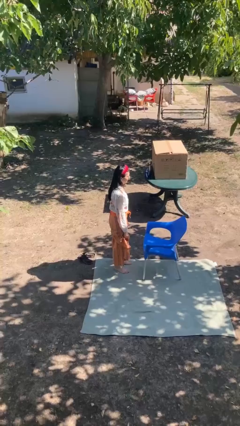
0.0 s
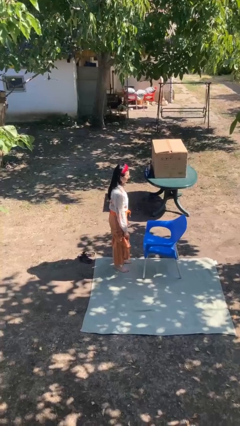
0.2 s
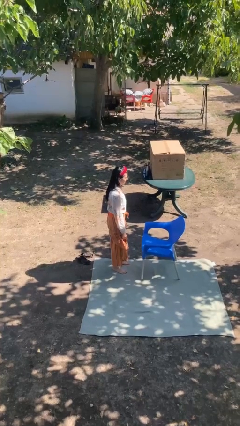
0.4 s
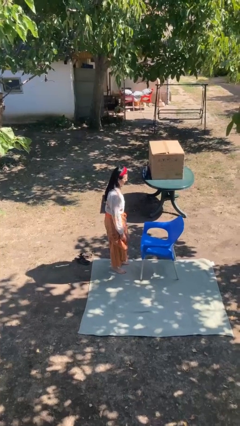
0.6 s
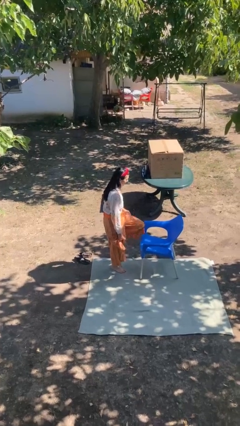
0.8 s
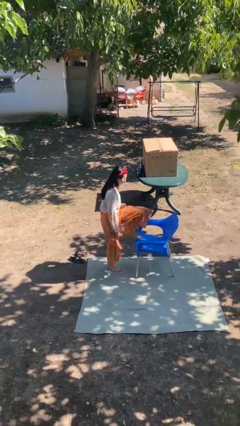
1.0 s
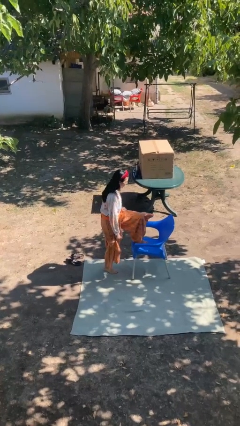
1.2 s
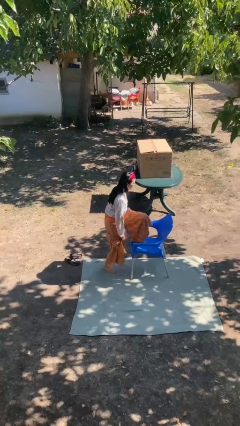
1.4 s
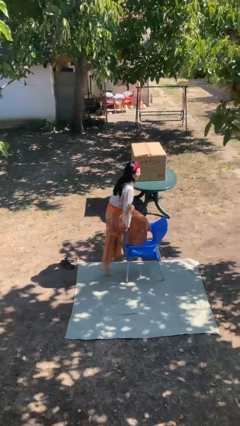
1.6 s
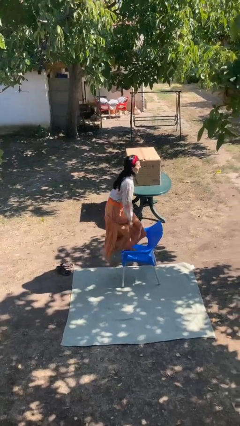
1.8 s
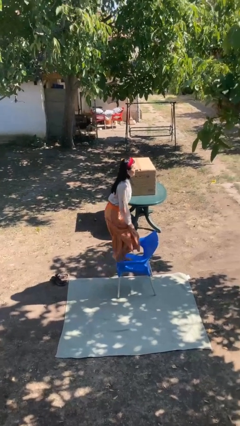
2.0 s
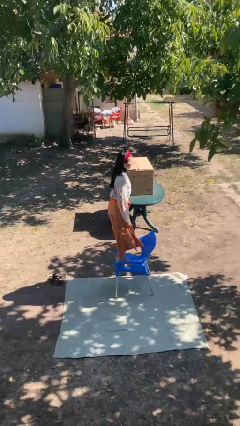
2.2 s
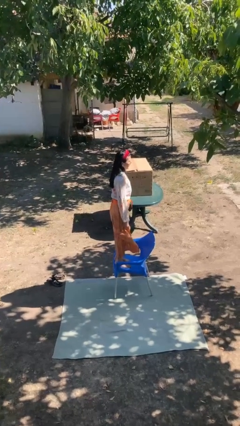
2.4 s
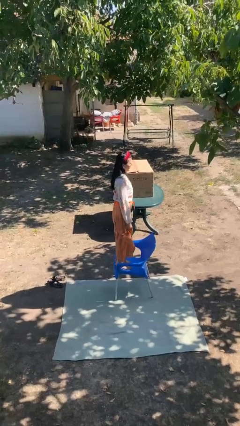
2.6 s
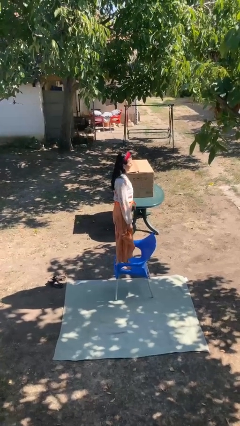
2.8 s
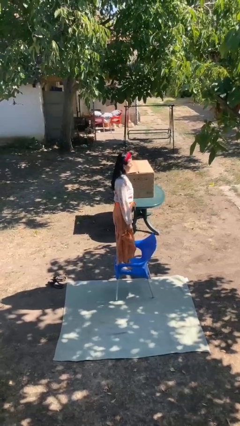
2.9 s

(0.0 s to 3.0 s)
person climbs on chair

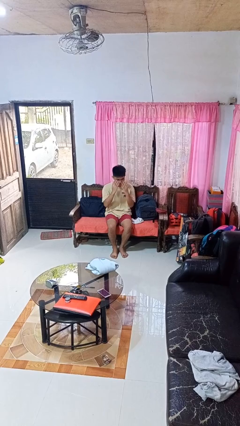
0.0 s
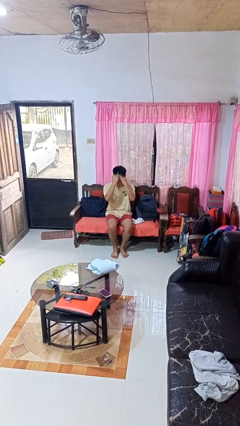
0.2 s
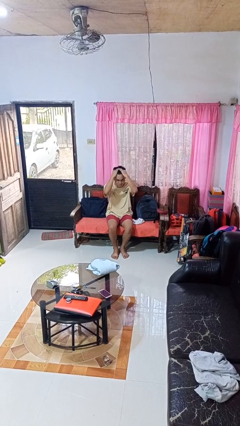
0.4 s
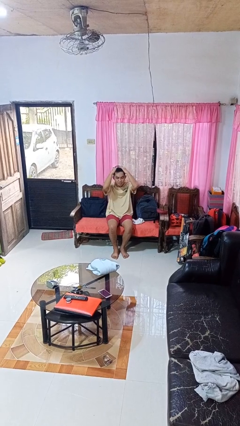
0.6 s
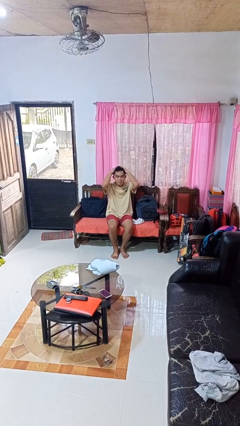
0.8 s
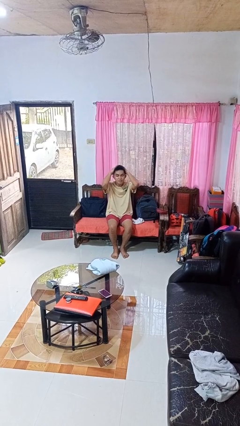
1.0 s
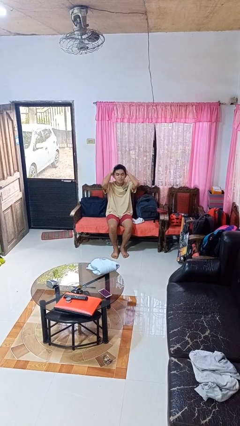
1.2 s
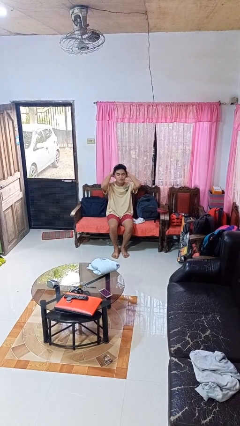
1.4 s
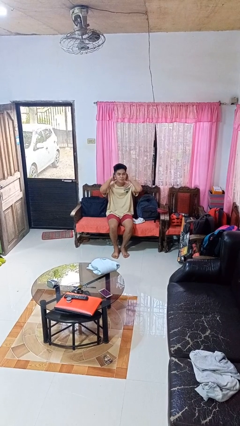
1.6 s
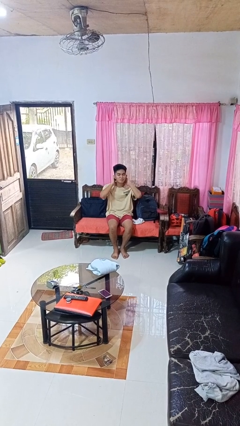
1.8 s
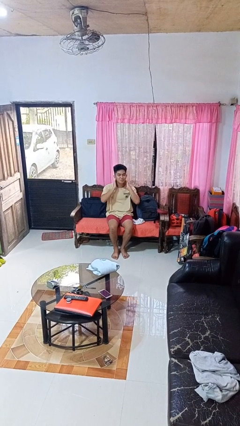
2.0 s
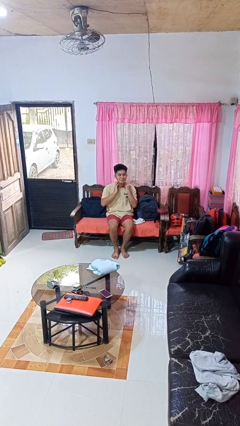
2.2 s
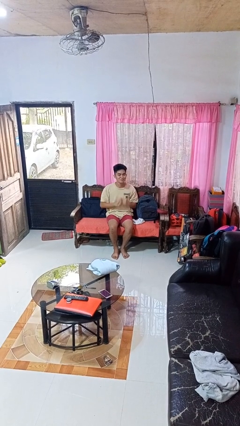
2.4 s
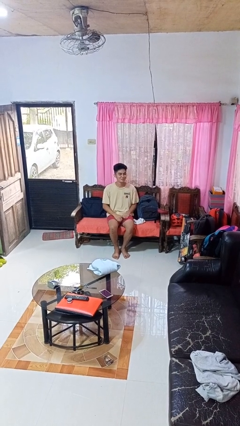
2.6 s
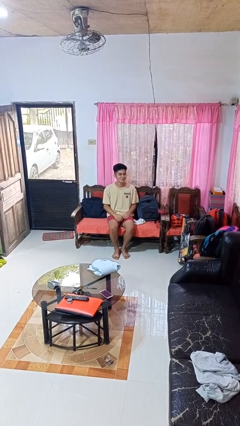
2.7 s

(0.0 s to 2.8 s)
person strokes hair

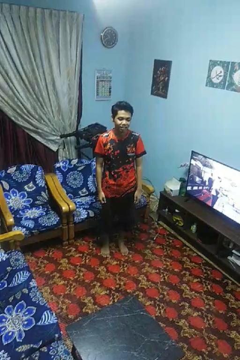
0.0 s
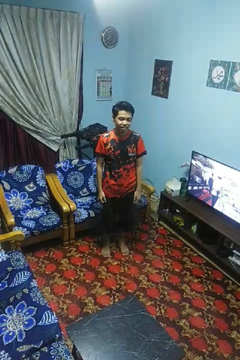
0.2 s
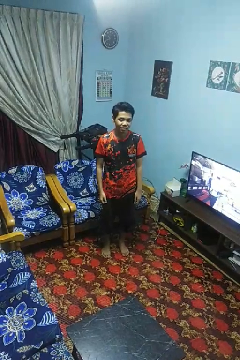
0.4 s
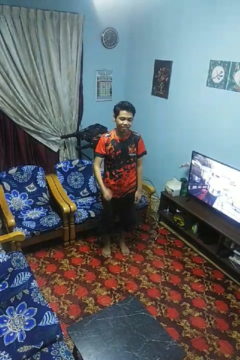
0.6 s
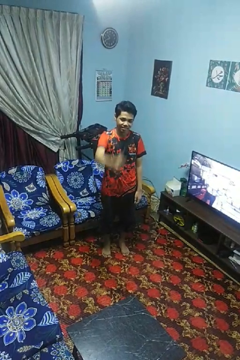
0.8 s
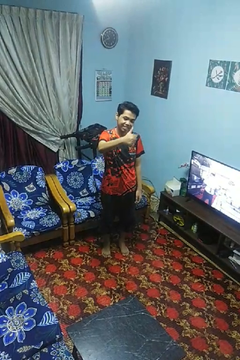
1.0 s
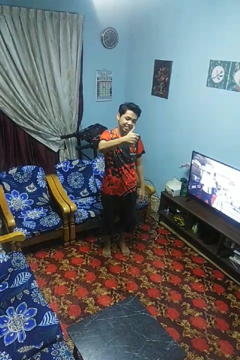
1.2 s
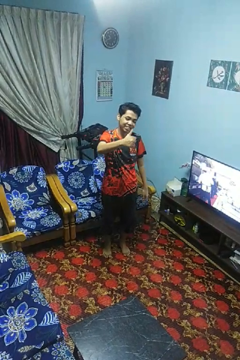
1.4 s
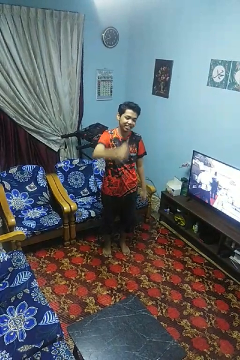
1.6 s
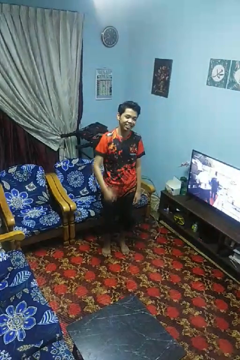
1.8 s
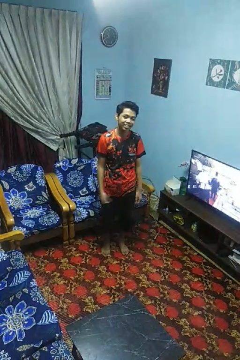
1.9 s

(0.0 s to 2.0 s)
person gestures thumbs up

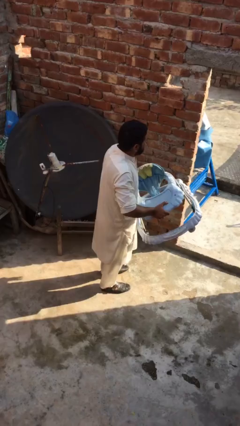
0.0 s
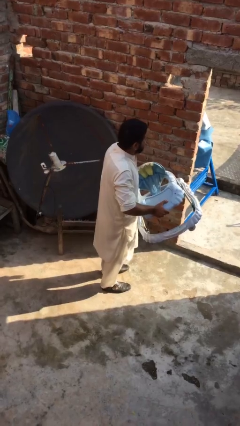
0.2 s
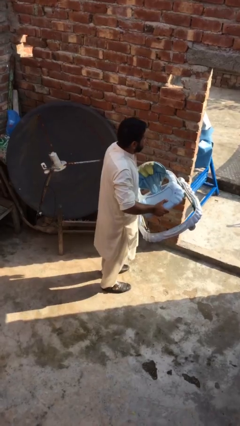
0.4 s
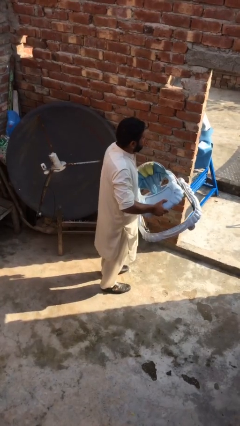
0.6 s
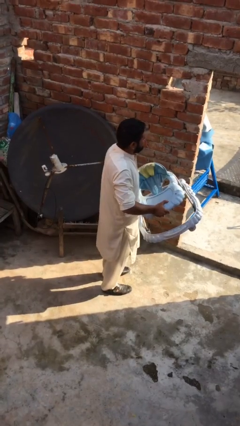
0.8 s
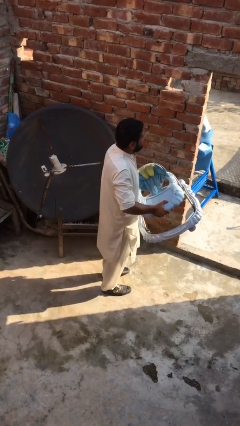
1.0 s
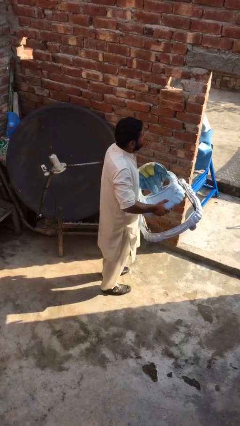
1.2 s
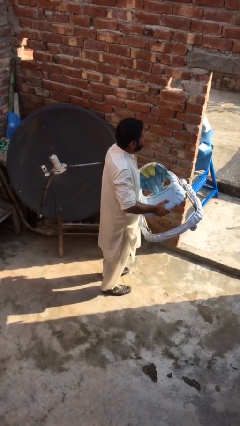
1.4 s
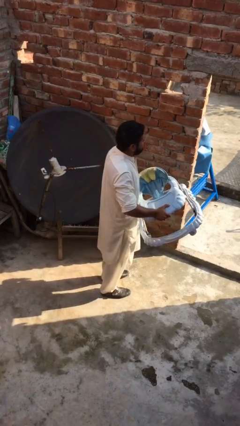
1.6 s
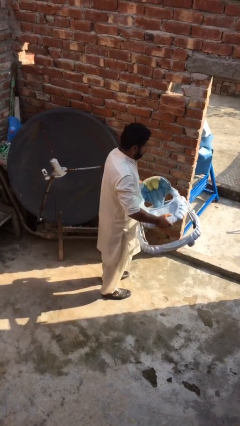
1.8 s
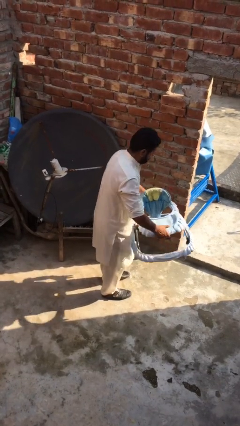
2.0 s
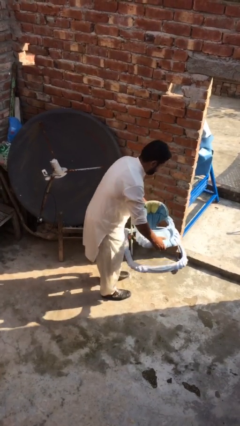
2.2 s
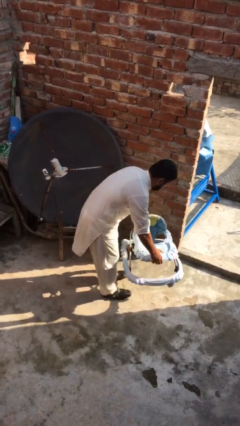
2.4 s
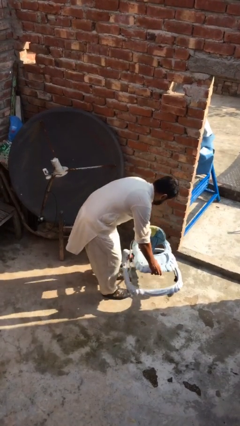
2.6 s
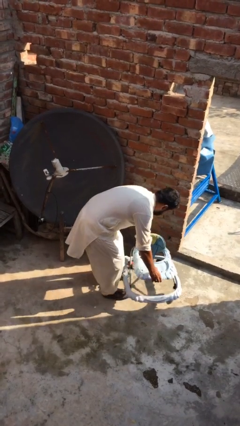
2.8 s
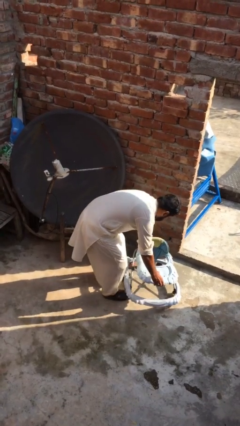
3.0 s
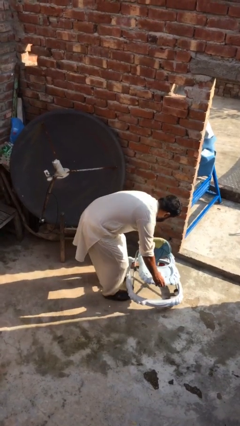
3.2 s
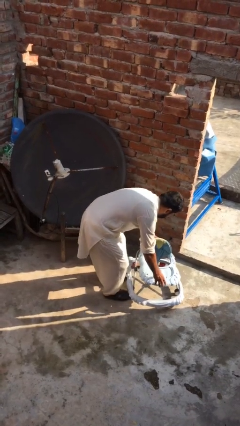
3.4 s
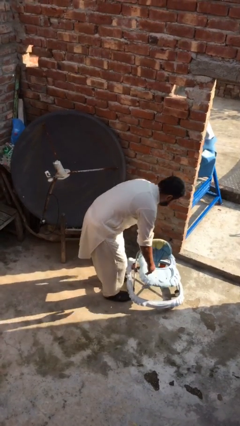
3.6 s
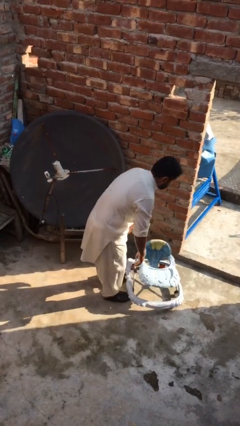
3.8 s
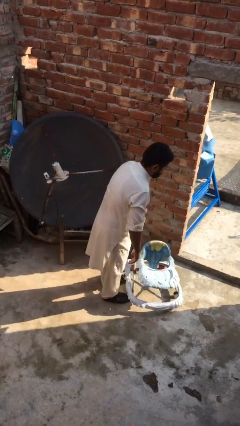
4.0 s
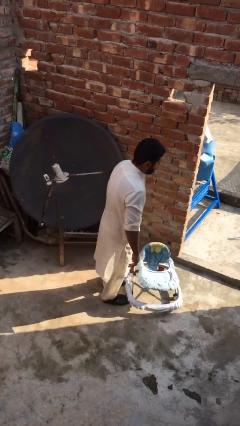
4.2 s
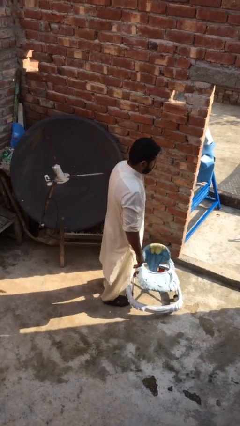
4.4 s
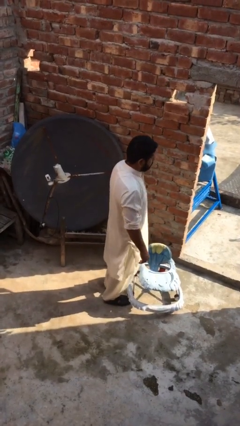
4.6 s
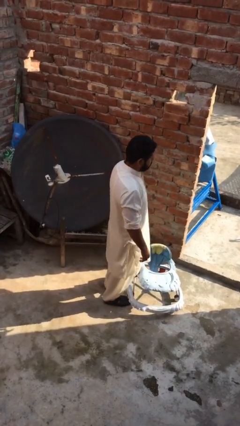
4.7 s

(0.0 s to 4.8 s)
person puts down object on floor

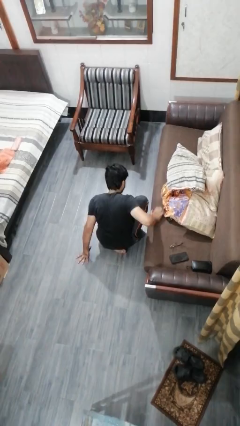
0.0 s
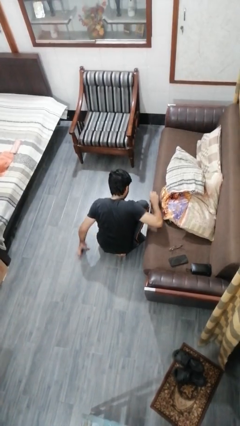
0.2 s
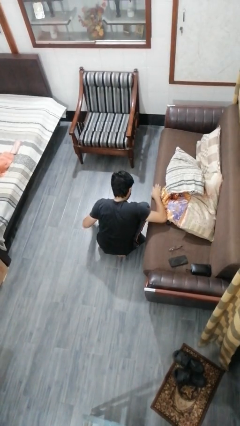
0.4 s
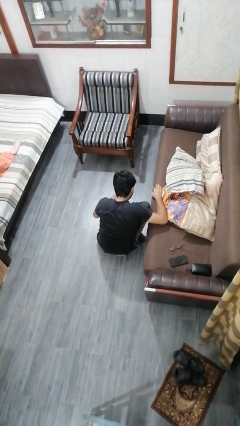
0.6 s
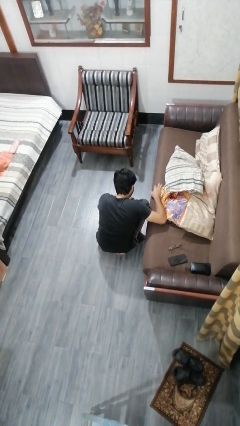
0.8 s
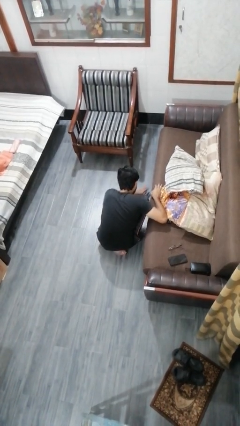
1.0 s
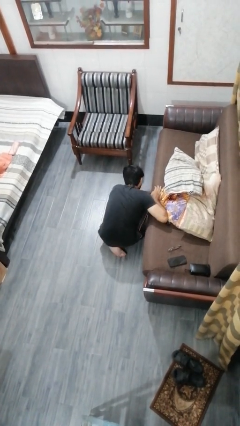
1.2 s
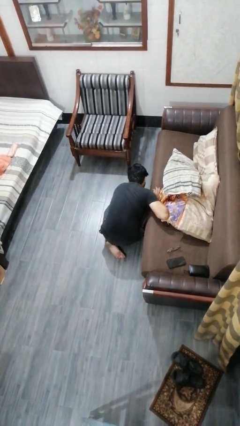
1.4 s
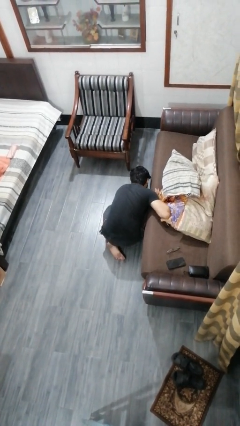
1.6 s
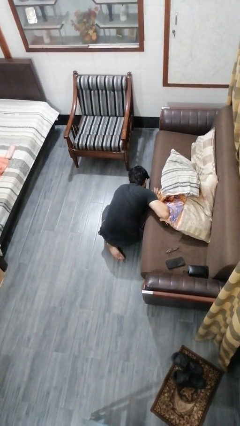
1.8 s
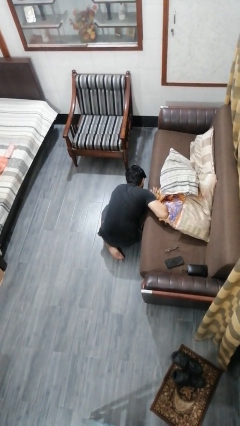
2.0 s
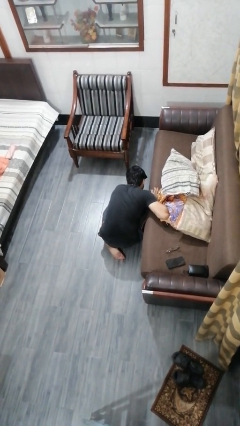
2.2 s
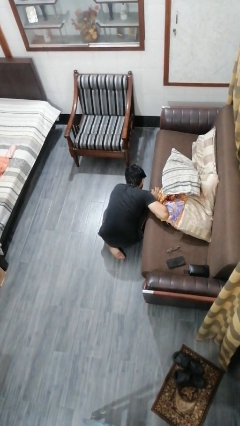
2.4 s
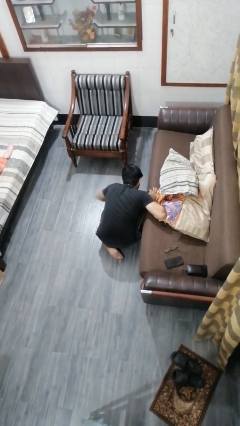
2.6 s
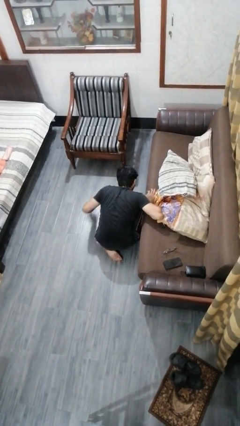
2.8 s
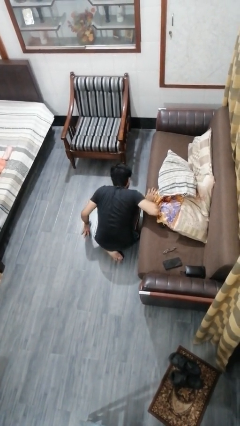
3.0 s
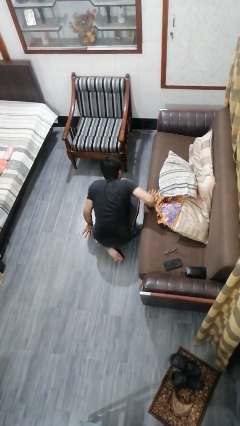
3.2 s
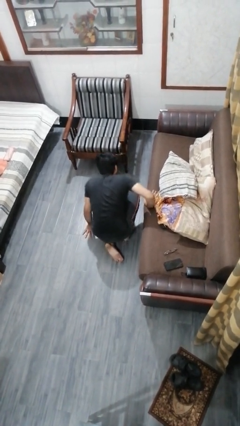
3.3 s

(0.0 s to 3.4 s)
person searches under couch

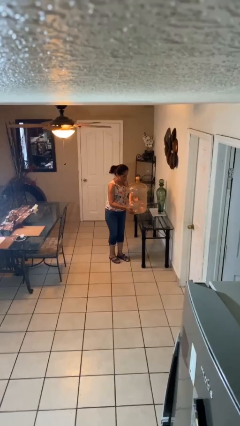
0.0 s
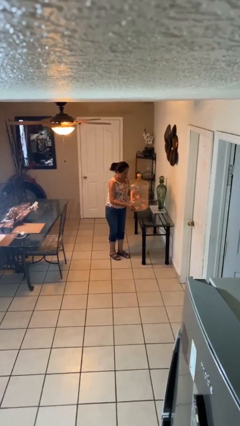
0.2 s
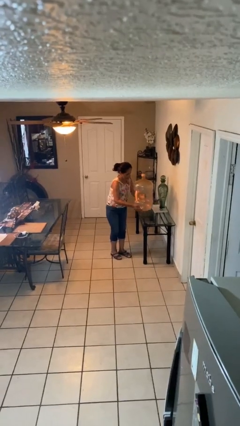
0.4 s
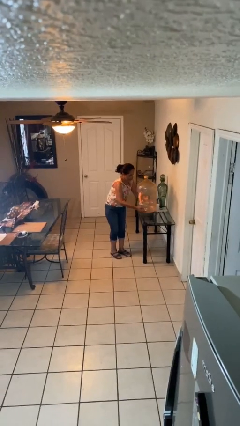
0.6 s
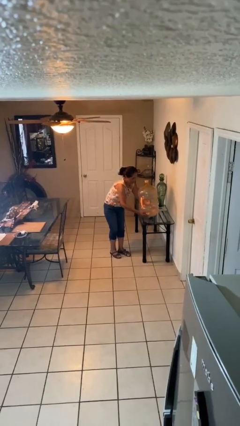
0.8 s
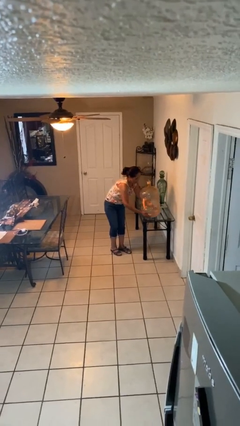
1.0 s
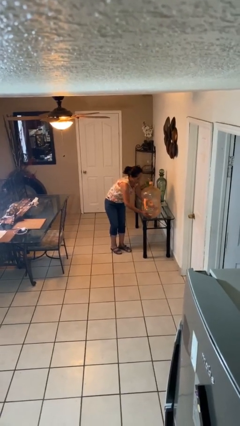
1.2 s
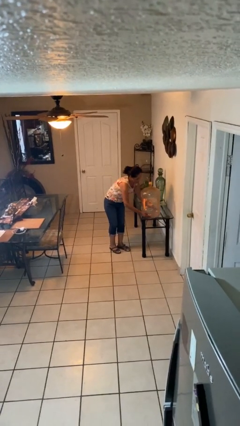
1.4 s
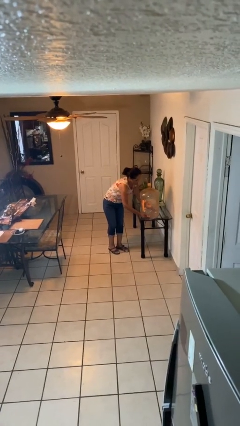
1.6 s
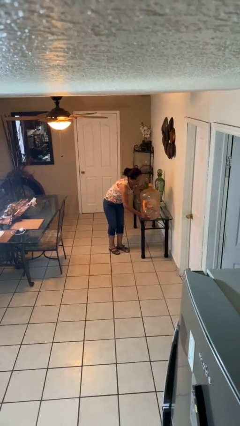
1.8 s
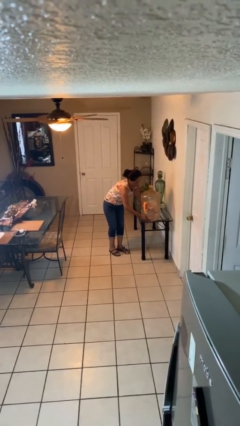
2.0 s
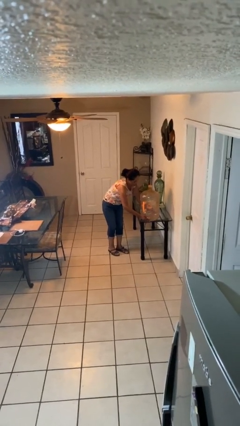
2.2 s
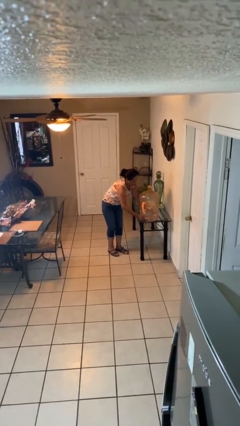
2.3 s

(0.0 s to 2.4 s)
person puts down object on table
